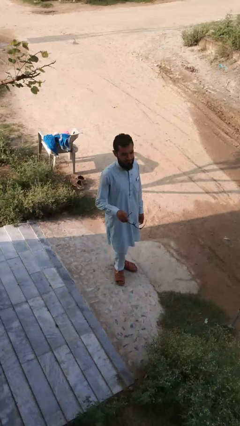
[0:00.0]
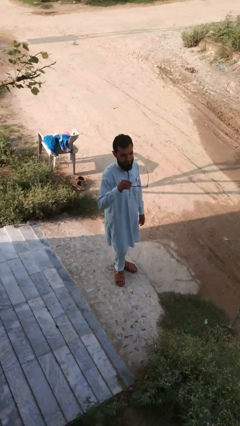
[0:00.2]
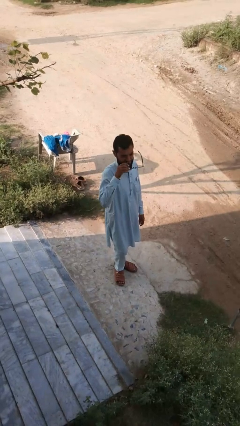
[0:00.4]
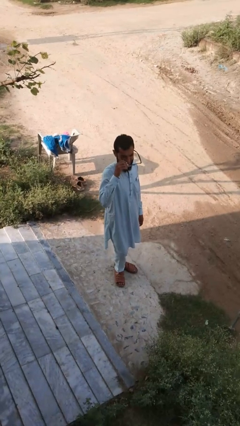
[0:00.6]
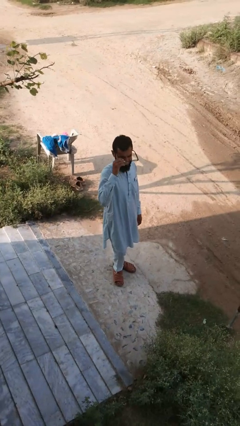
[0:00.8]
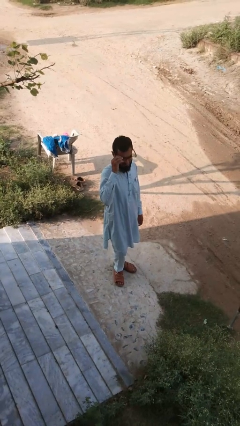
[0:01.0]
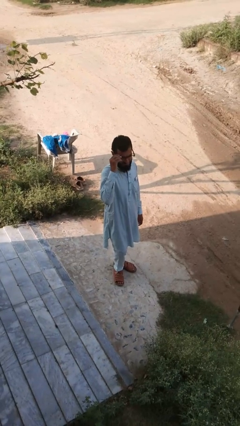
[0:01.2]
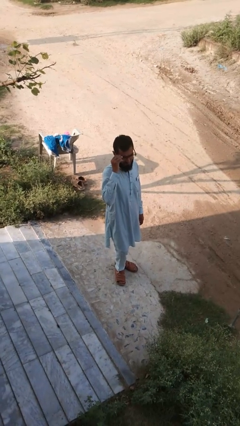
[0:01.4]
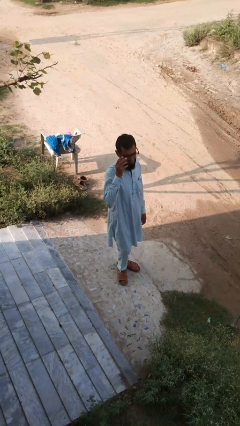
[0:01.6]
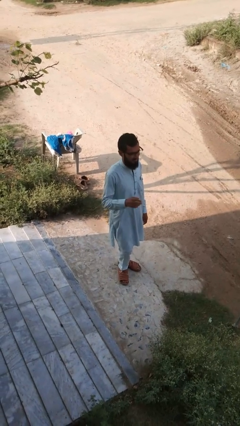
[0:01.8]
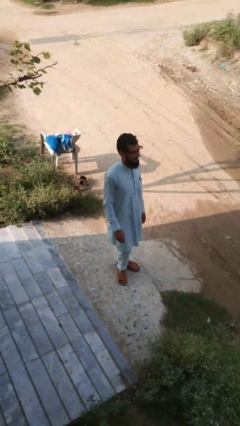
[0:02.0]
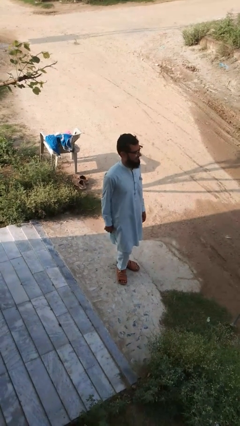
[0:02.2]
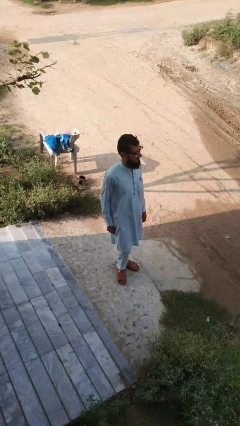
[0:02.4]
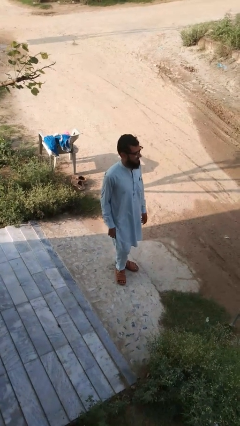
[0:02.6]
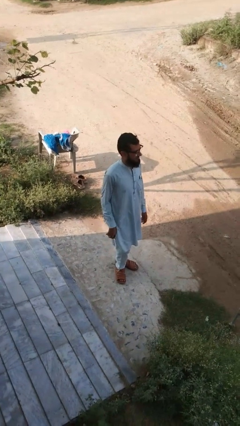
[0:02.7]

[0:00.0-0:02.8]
person puts on glasses

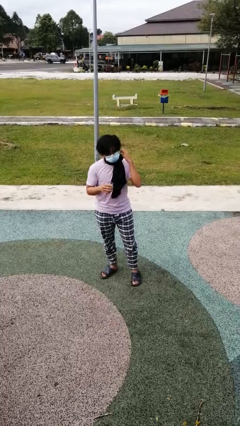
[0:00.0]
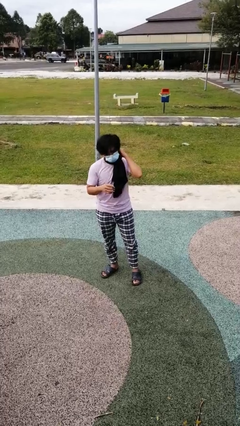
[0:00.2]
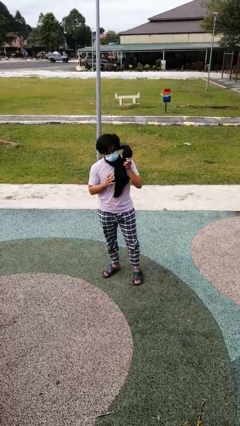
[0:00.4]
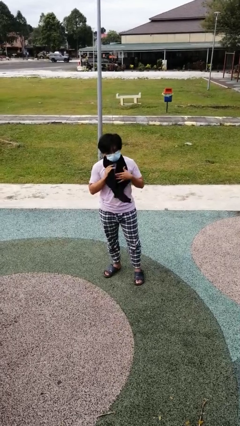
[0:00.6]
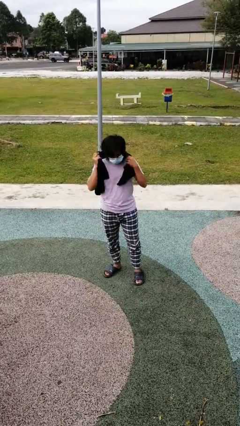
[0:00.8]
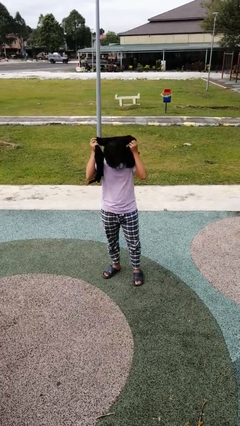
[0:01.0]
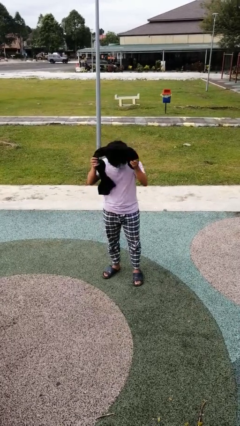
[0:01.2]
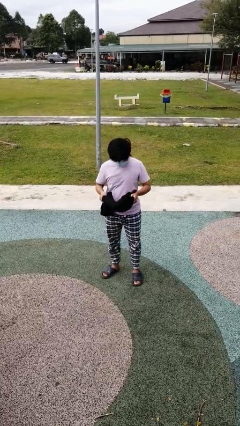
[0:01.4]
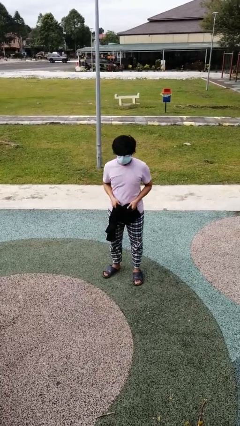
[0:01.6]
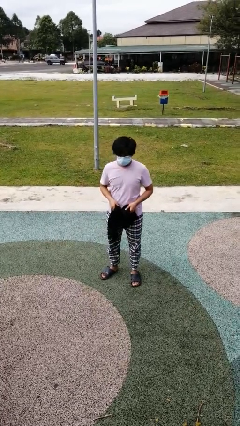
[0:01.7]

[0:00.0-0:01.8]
person takes off scarf

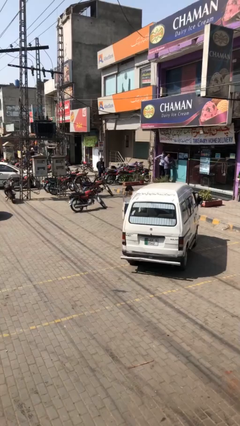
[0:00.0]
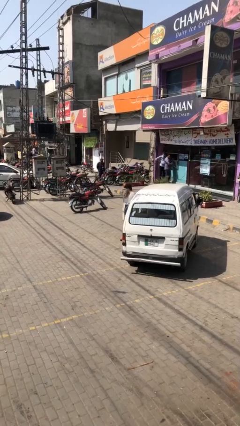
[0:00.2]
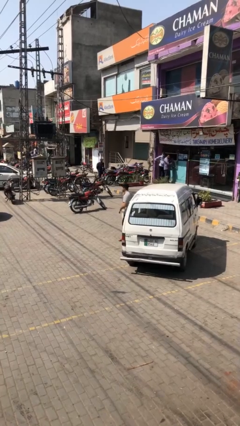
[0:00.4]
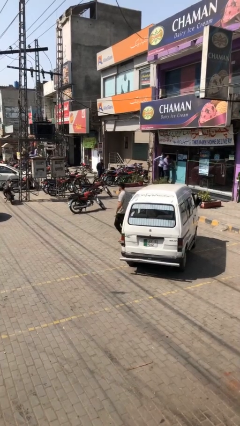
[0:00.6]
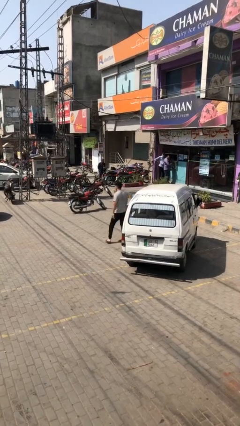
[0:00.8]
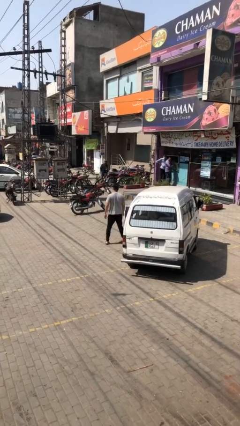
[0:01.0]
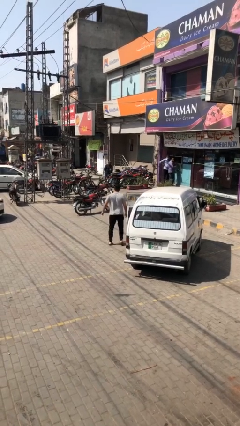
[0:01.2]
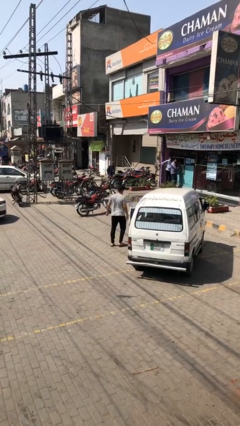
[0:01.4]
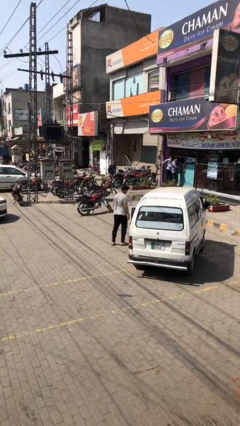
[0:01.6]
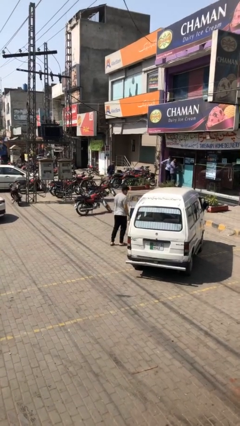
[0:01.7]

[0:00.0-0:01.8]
person exits car

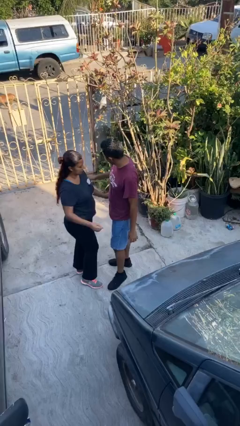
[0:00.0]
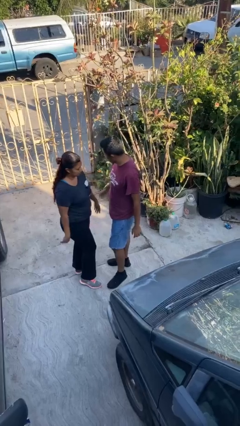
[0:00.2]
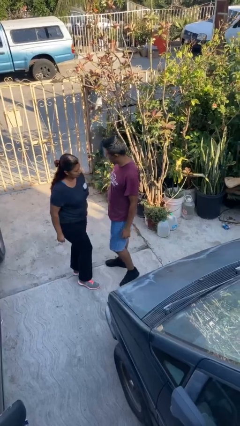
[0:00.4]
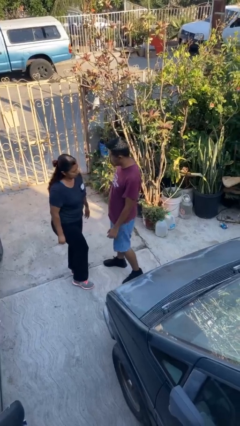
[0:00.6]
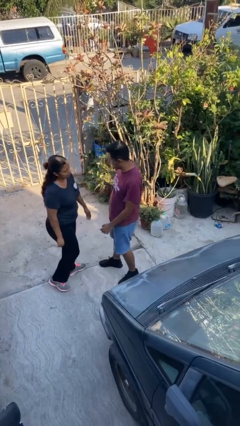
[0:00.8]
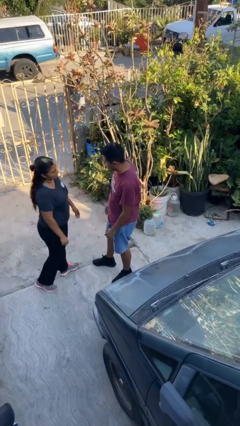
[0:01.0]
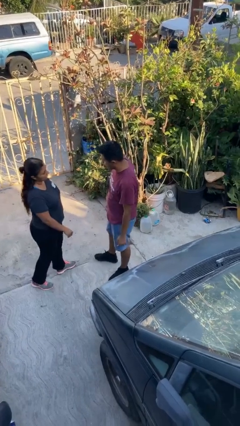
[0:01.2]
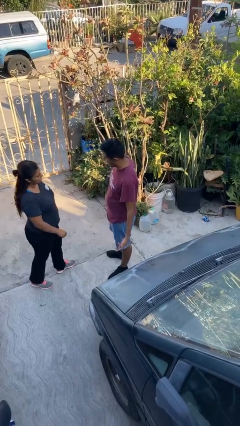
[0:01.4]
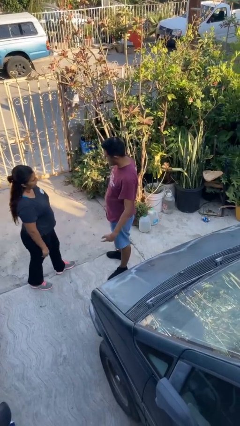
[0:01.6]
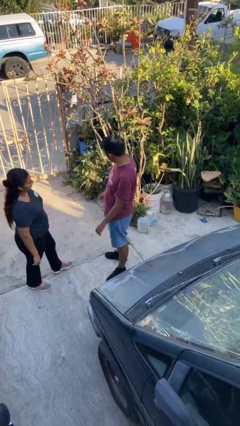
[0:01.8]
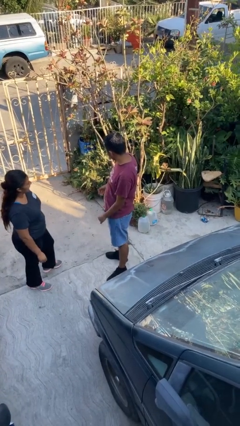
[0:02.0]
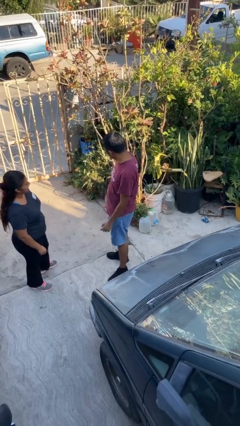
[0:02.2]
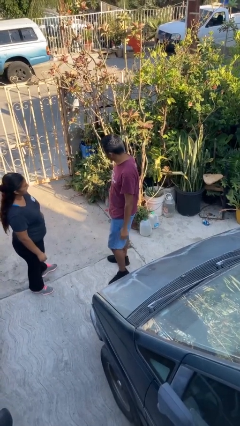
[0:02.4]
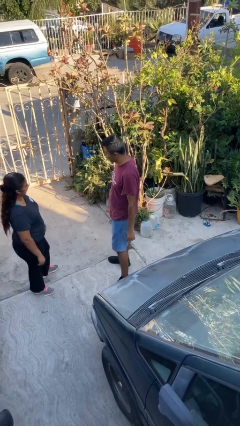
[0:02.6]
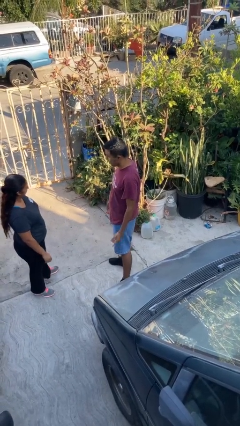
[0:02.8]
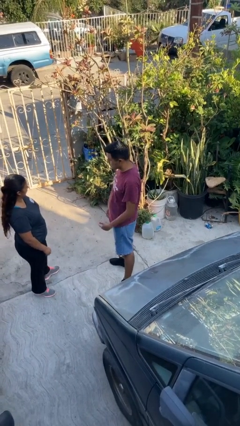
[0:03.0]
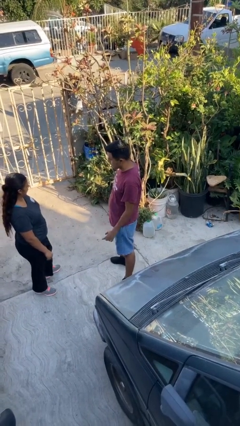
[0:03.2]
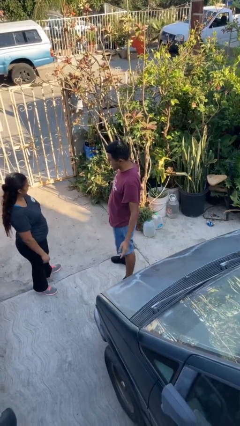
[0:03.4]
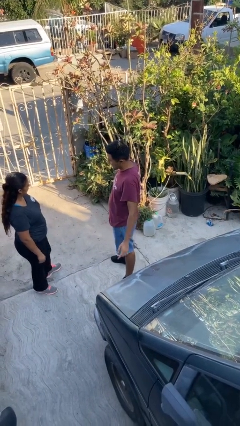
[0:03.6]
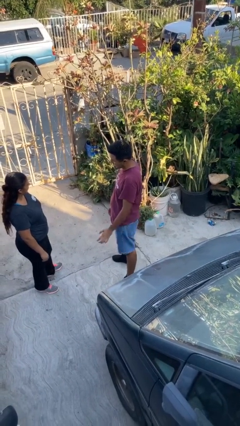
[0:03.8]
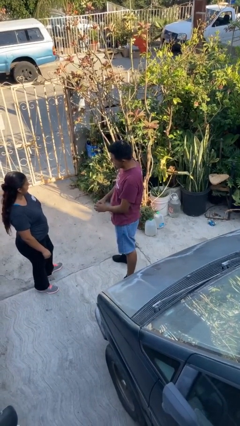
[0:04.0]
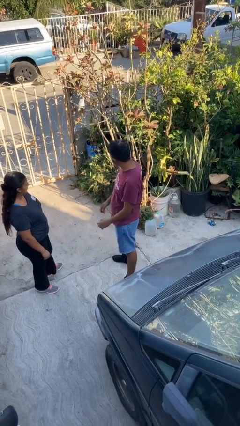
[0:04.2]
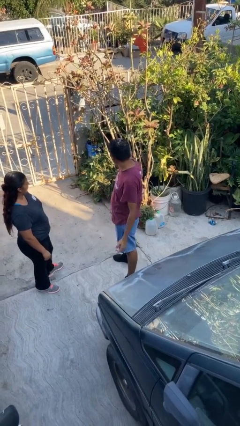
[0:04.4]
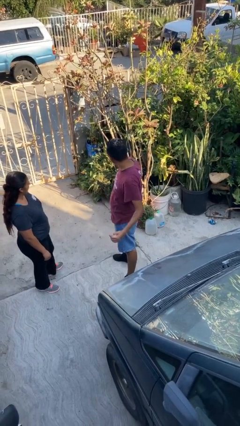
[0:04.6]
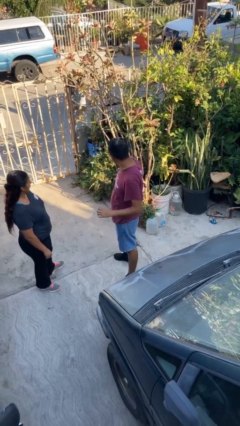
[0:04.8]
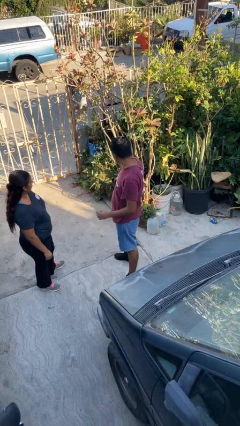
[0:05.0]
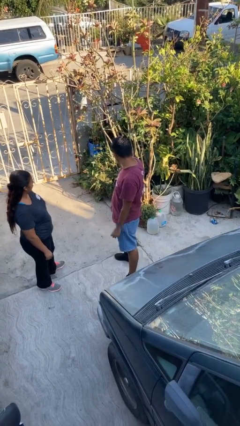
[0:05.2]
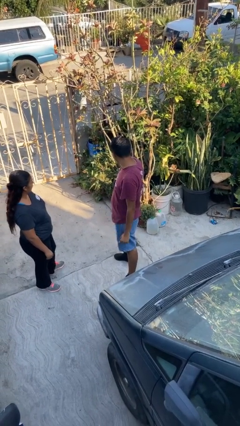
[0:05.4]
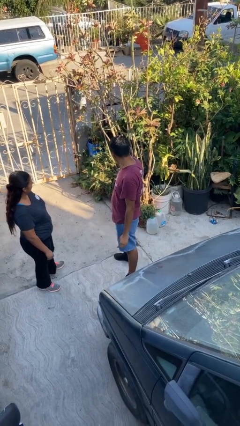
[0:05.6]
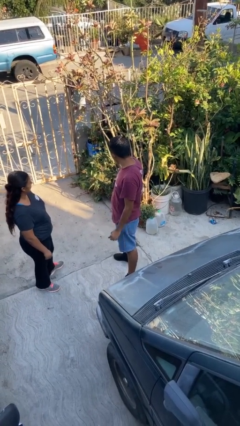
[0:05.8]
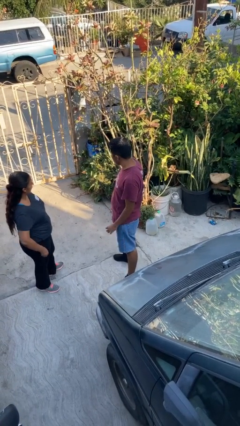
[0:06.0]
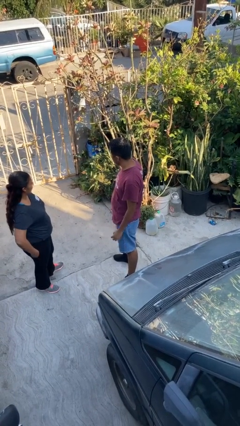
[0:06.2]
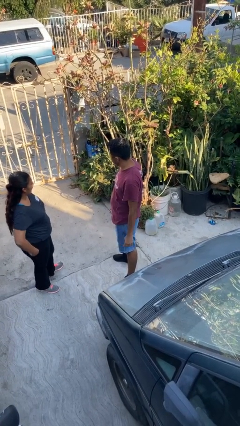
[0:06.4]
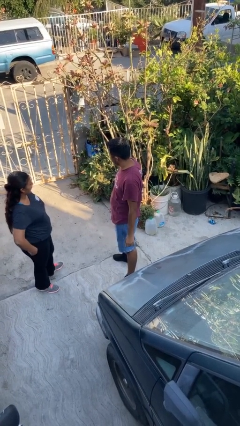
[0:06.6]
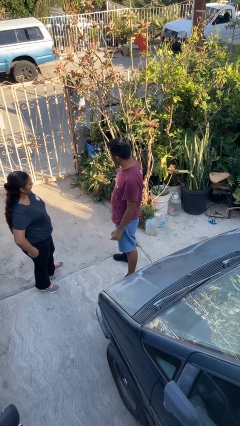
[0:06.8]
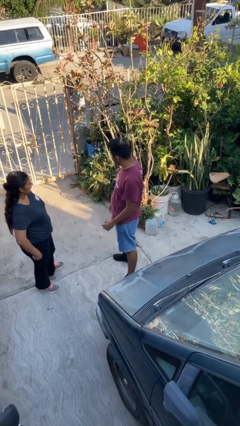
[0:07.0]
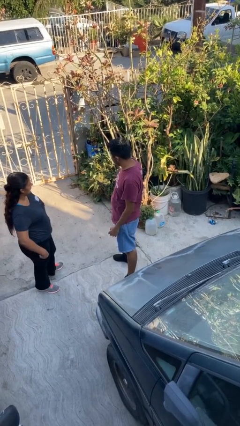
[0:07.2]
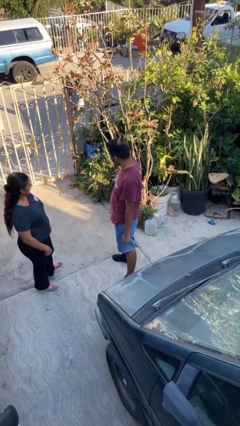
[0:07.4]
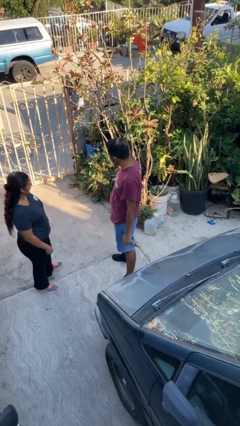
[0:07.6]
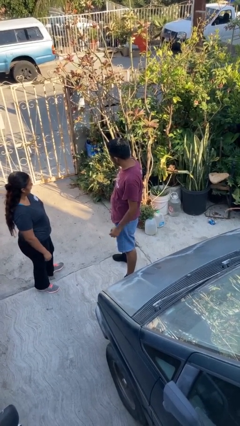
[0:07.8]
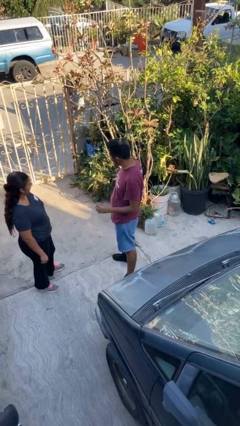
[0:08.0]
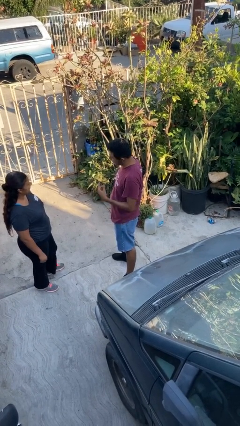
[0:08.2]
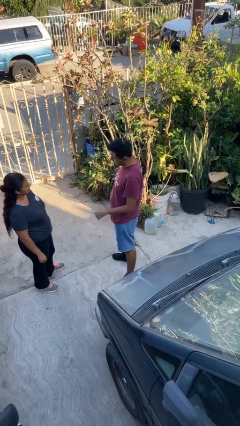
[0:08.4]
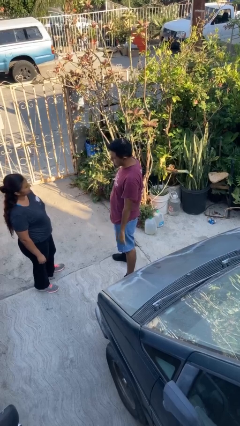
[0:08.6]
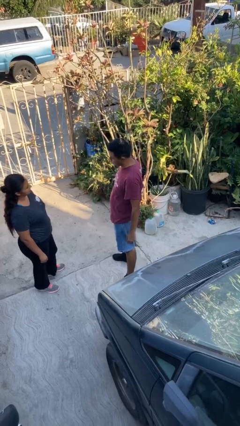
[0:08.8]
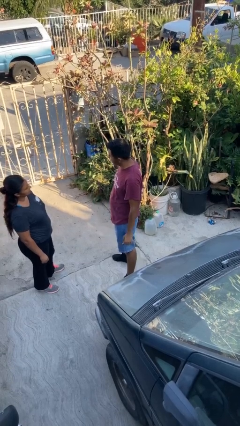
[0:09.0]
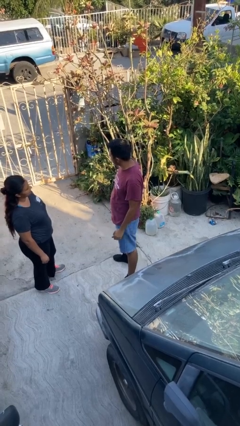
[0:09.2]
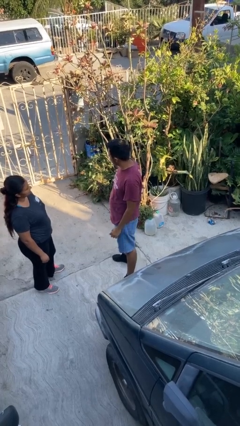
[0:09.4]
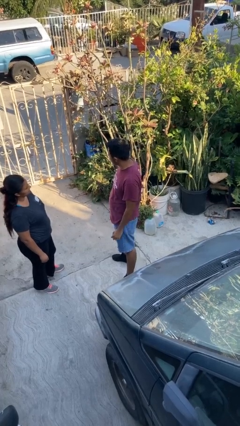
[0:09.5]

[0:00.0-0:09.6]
person talks to person

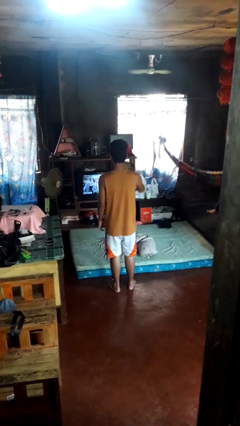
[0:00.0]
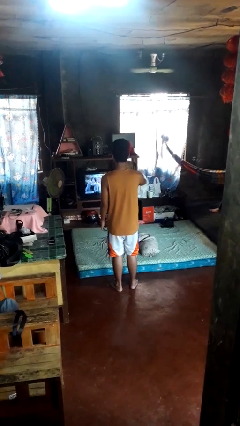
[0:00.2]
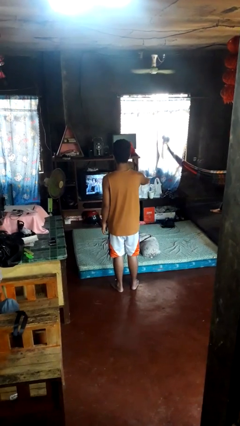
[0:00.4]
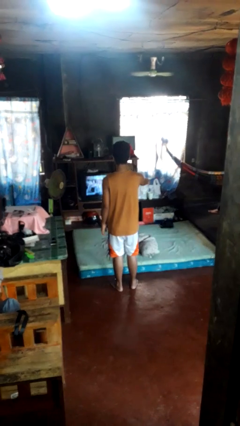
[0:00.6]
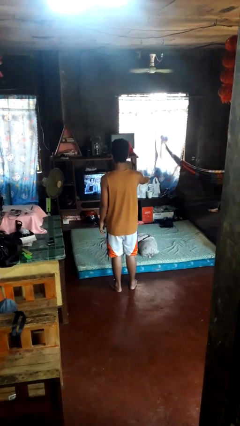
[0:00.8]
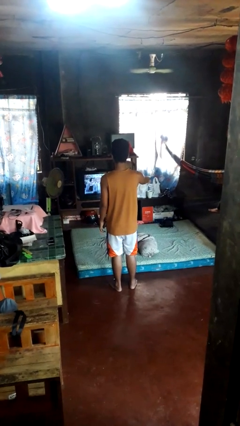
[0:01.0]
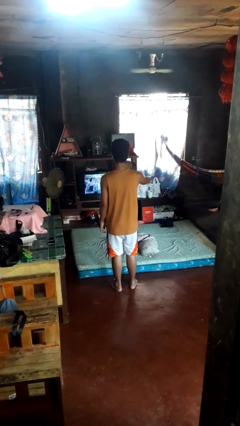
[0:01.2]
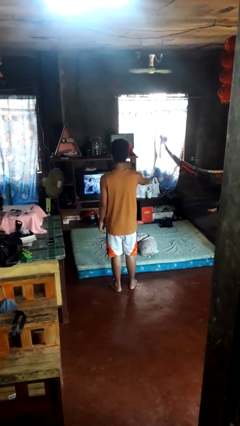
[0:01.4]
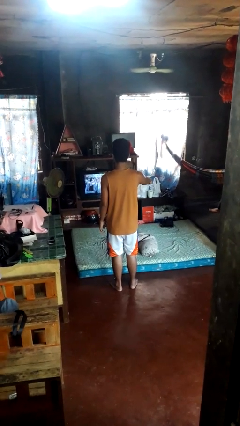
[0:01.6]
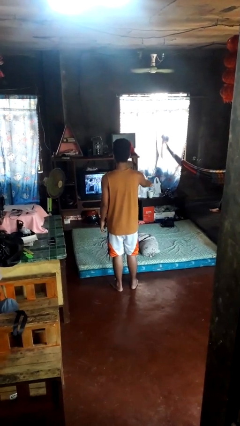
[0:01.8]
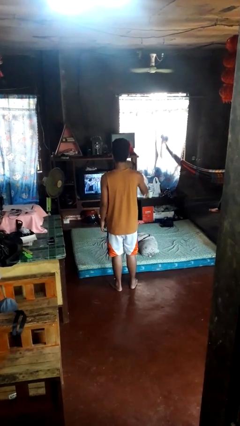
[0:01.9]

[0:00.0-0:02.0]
person uses television remote
